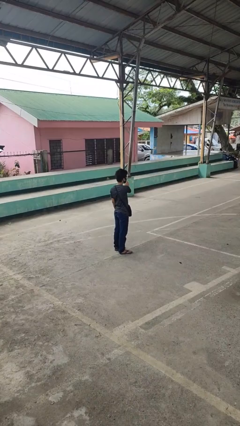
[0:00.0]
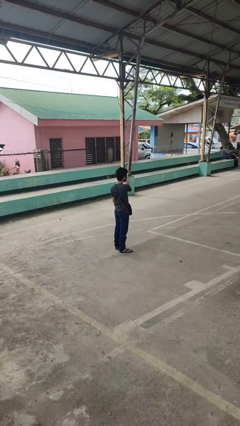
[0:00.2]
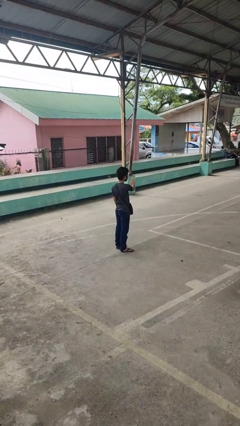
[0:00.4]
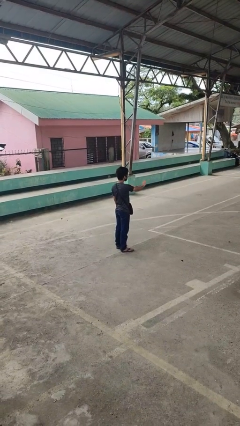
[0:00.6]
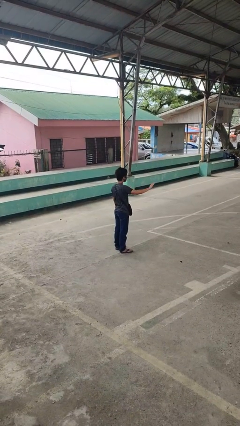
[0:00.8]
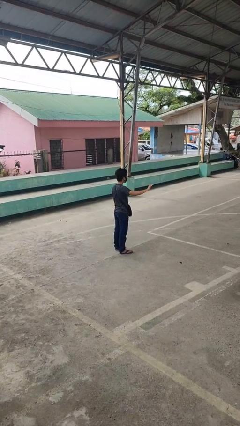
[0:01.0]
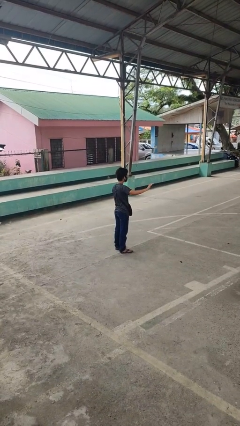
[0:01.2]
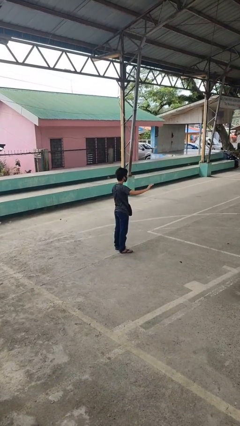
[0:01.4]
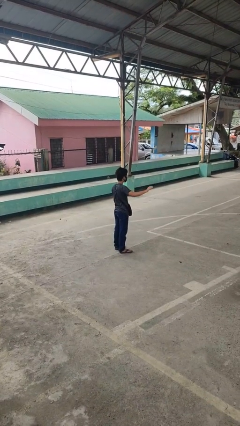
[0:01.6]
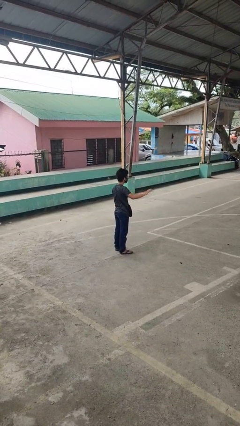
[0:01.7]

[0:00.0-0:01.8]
person gestures swipe right

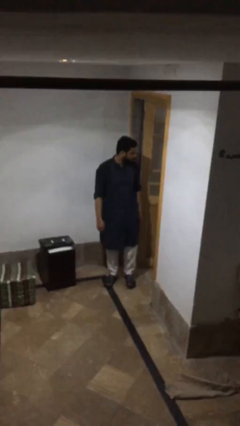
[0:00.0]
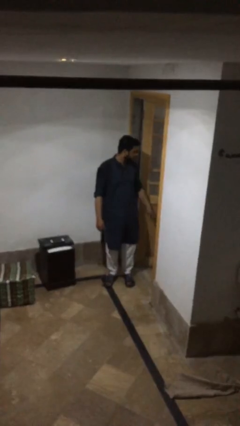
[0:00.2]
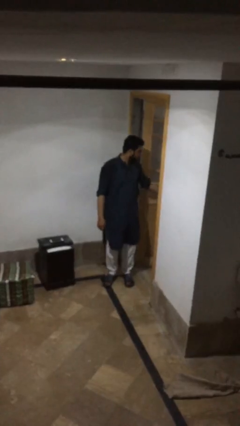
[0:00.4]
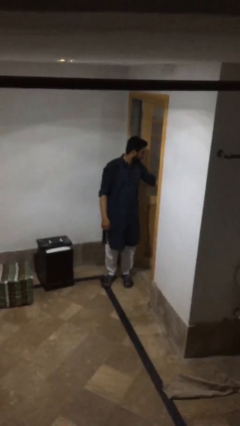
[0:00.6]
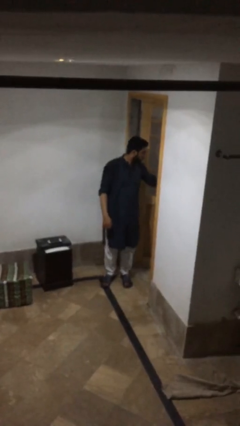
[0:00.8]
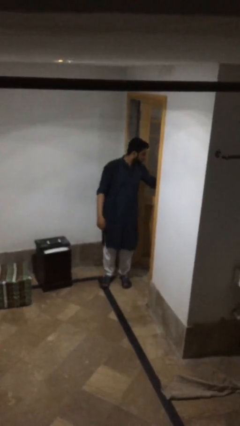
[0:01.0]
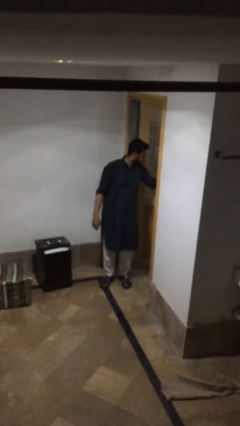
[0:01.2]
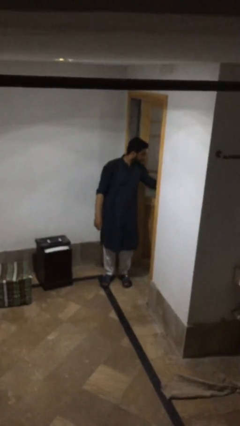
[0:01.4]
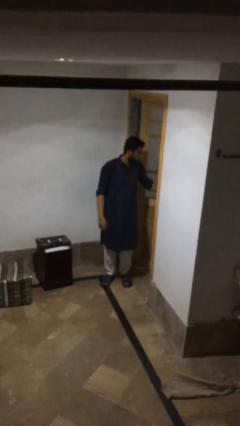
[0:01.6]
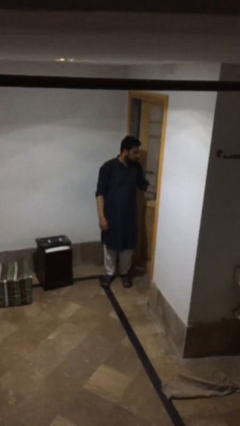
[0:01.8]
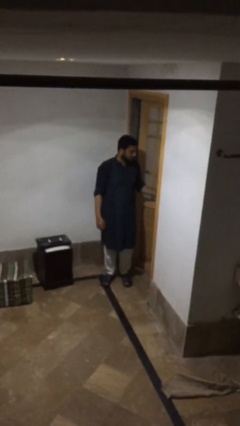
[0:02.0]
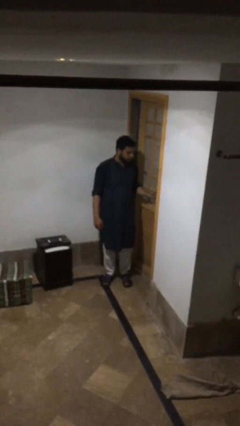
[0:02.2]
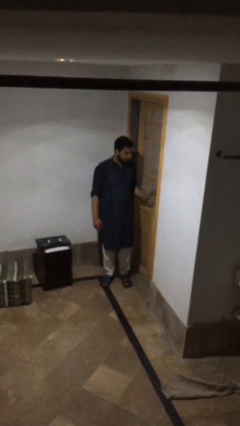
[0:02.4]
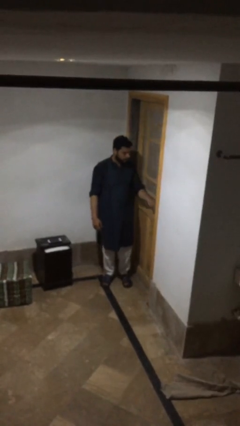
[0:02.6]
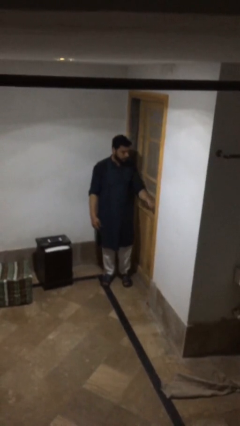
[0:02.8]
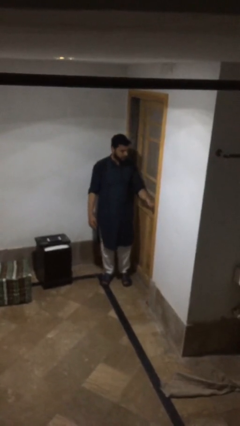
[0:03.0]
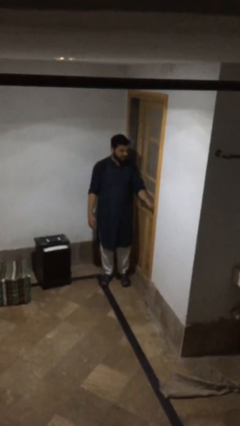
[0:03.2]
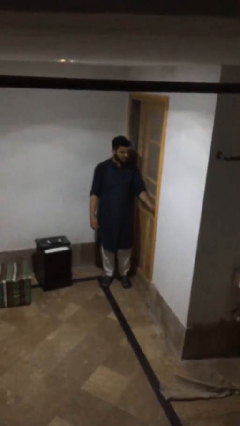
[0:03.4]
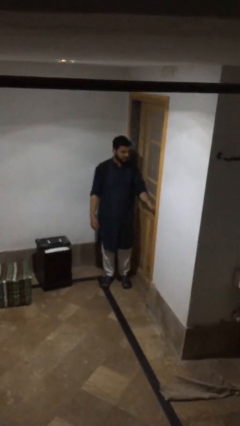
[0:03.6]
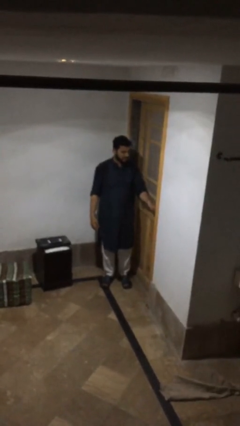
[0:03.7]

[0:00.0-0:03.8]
person closes facility door

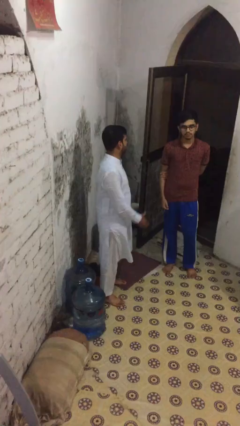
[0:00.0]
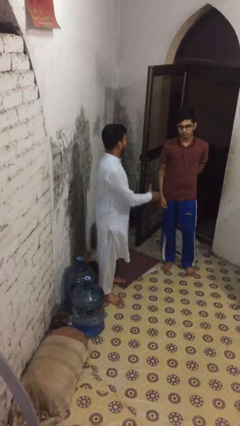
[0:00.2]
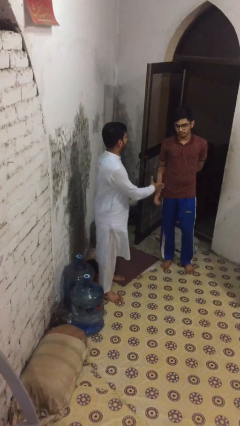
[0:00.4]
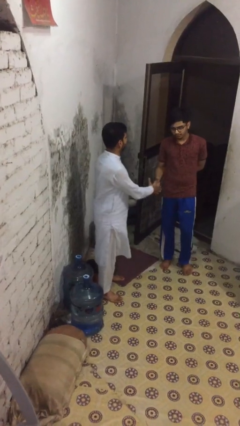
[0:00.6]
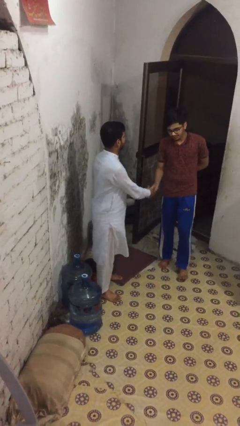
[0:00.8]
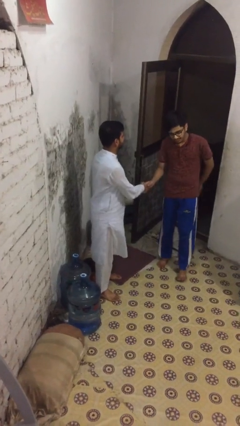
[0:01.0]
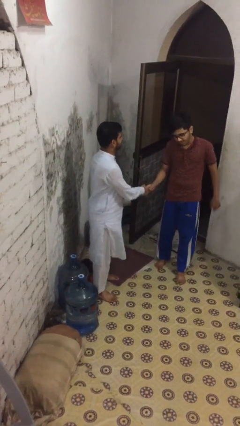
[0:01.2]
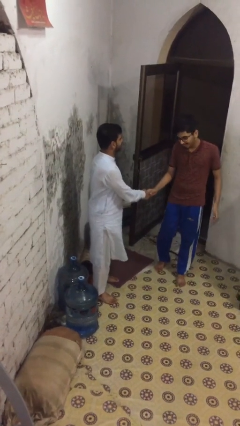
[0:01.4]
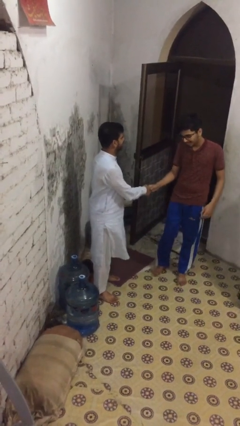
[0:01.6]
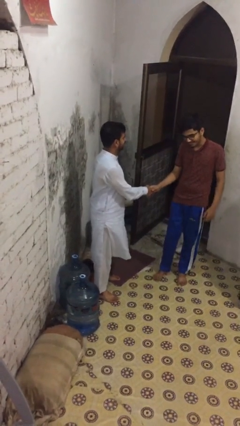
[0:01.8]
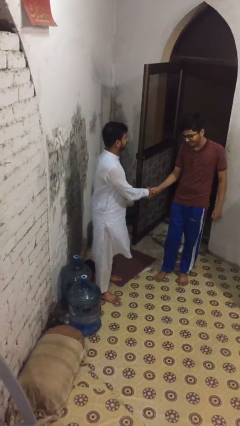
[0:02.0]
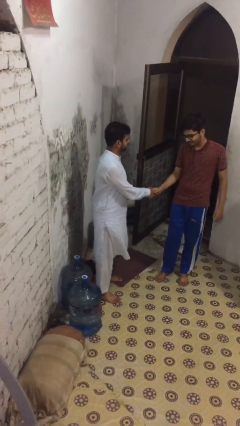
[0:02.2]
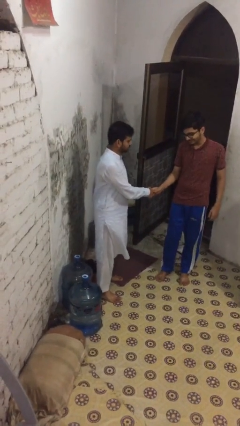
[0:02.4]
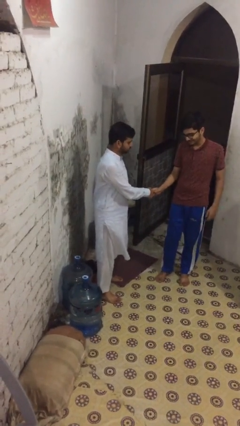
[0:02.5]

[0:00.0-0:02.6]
person shakes hand

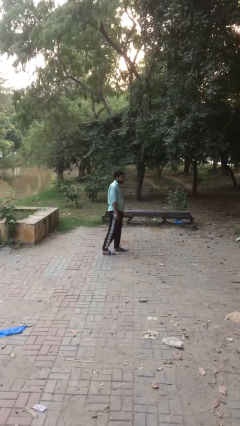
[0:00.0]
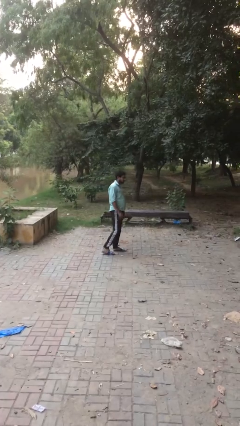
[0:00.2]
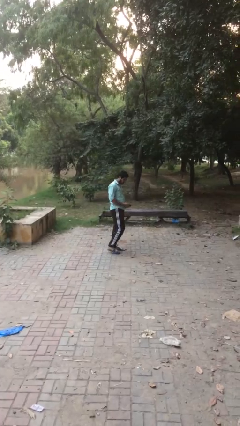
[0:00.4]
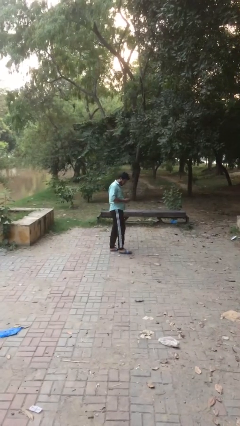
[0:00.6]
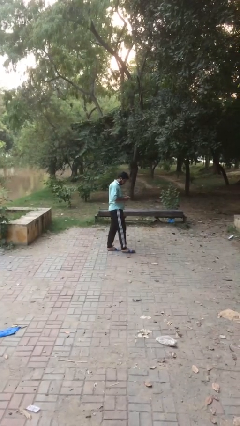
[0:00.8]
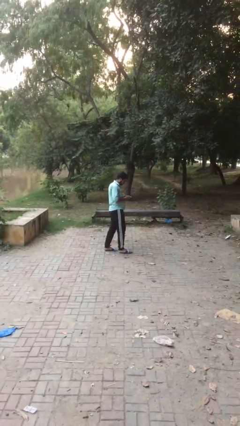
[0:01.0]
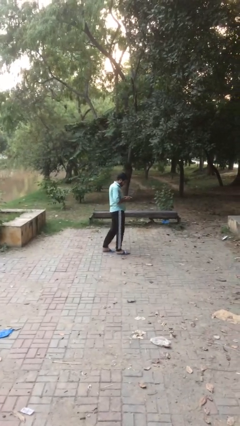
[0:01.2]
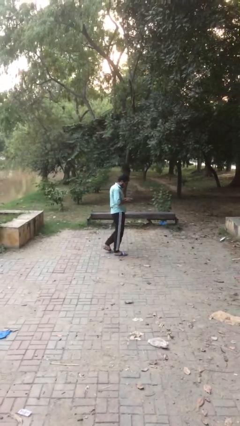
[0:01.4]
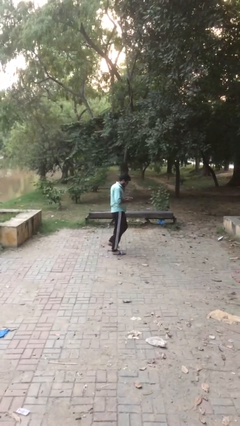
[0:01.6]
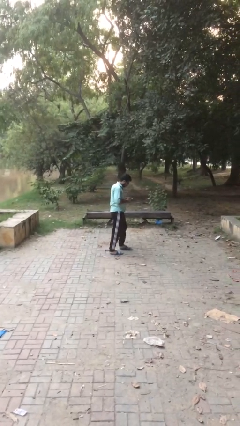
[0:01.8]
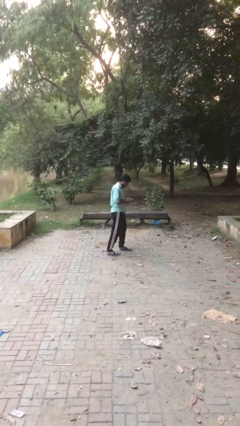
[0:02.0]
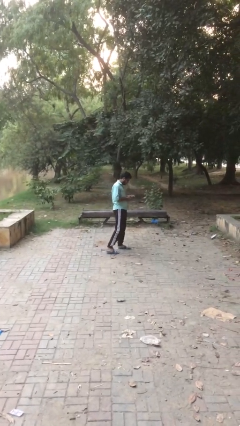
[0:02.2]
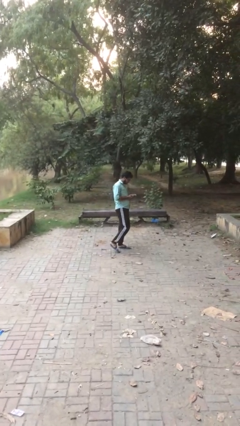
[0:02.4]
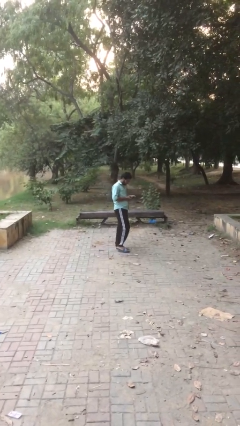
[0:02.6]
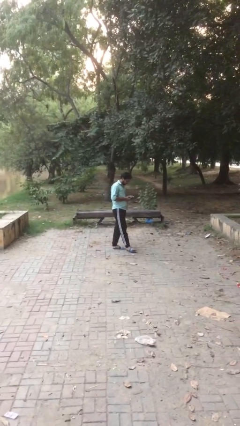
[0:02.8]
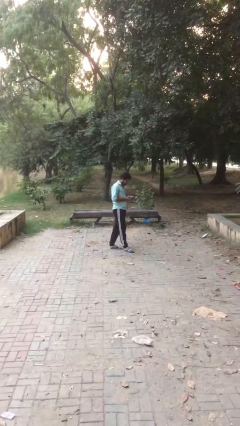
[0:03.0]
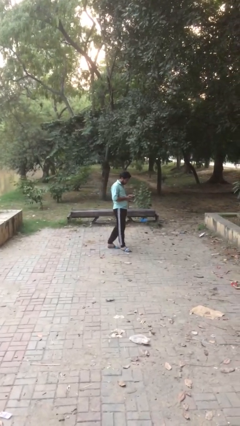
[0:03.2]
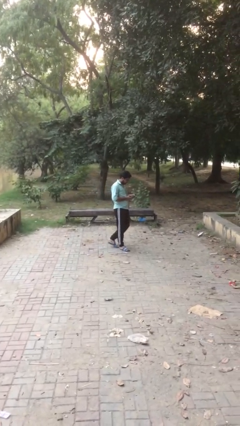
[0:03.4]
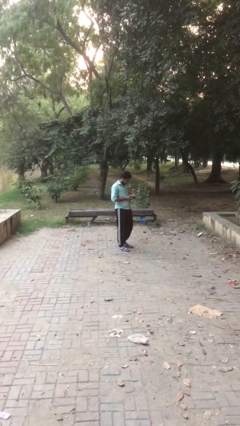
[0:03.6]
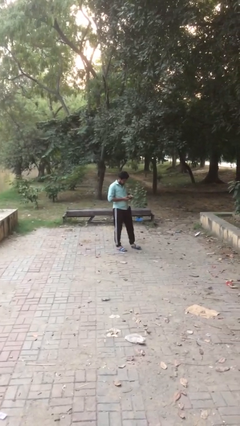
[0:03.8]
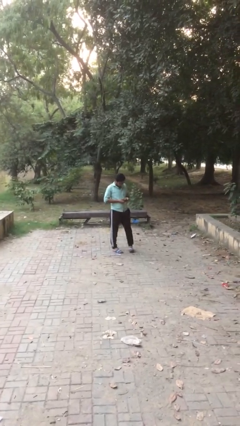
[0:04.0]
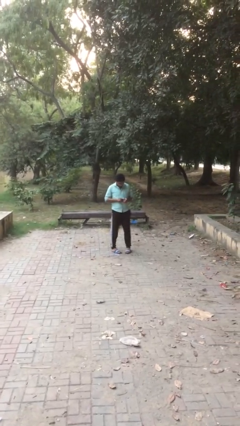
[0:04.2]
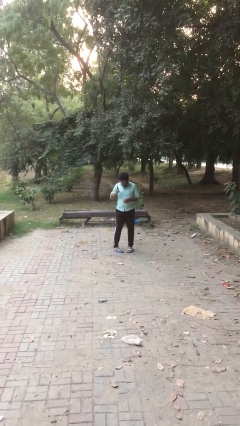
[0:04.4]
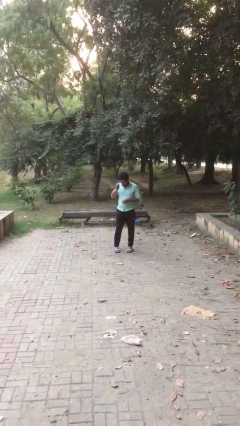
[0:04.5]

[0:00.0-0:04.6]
person texts on phone

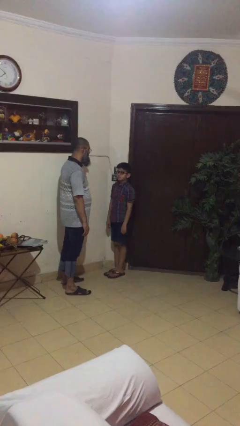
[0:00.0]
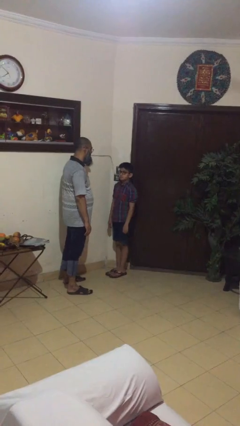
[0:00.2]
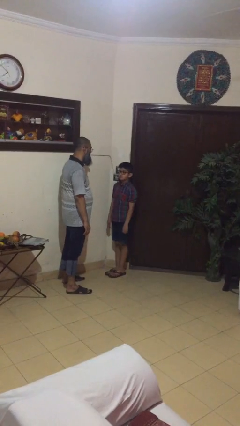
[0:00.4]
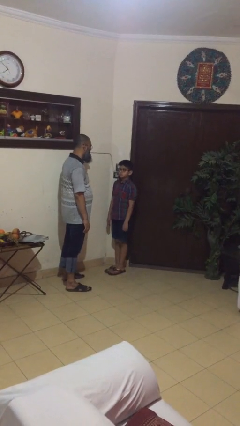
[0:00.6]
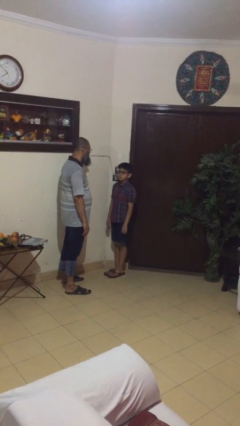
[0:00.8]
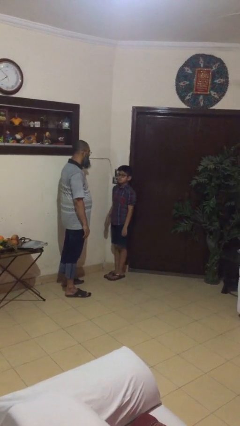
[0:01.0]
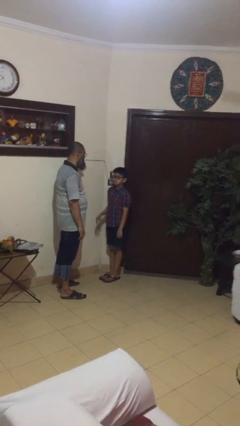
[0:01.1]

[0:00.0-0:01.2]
person highfives hand

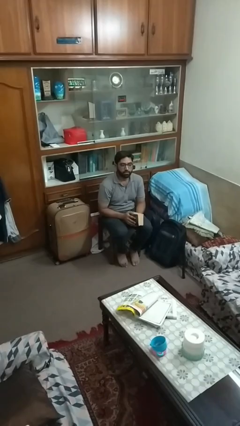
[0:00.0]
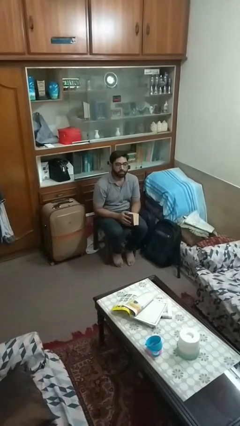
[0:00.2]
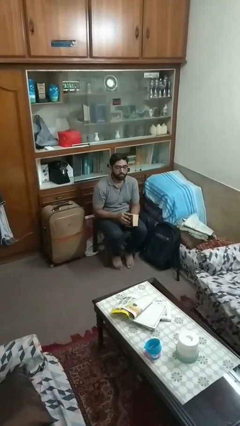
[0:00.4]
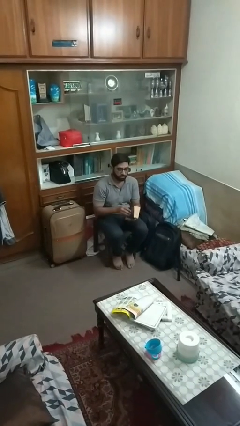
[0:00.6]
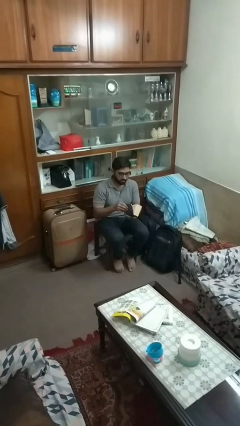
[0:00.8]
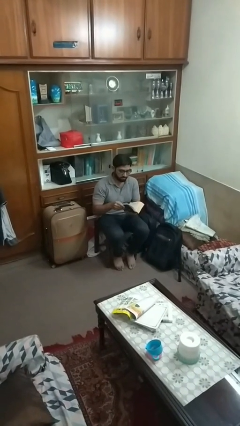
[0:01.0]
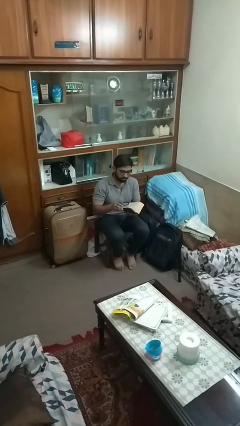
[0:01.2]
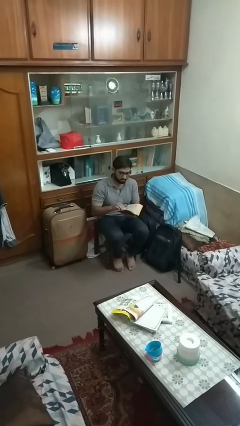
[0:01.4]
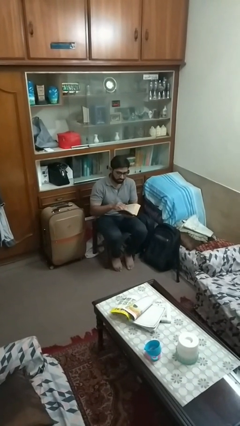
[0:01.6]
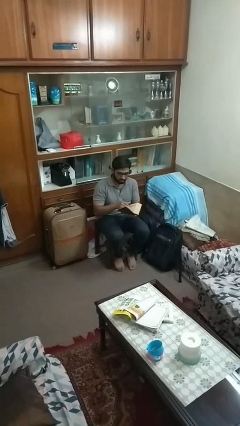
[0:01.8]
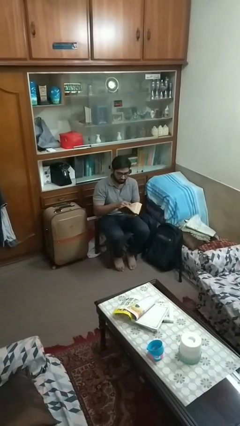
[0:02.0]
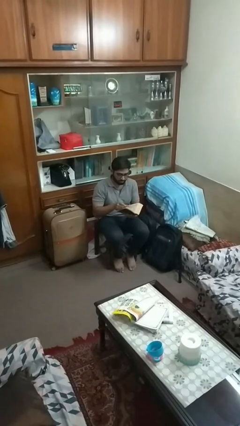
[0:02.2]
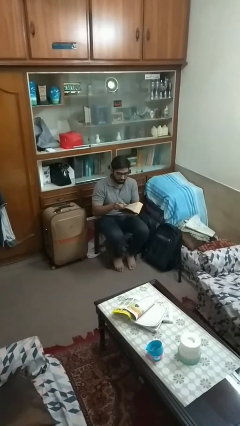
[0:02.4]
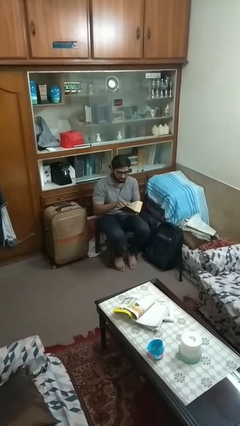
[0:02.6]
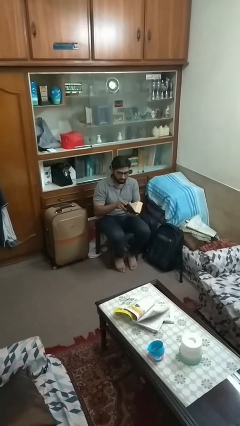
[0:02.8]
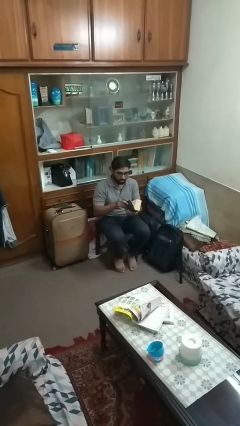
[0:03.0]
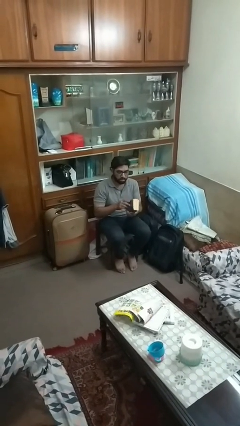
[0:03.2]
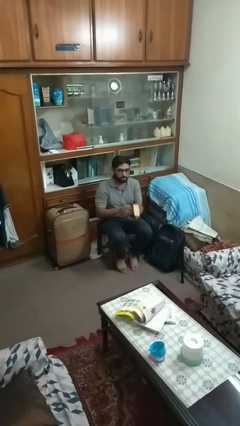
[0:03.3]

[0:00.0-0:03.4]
person reads book
